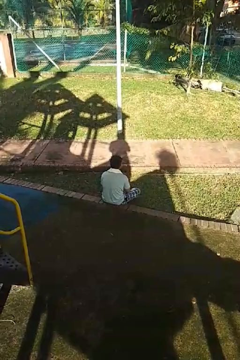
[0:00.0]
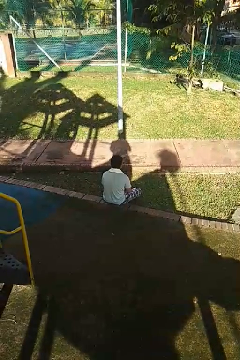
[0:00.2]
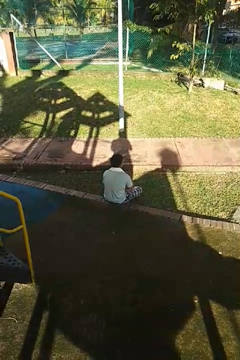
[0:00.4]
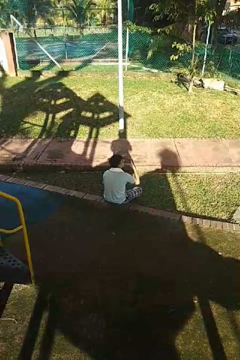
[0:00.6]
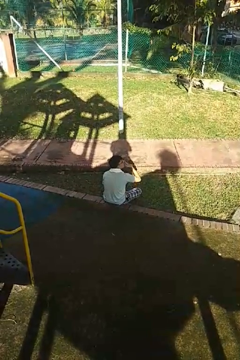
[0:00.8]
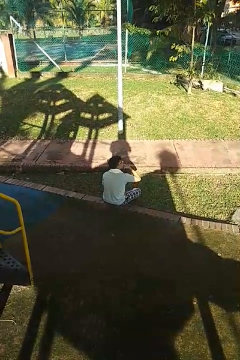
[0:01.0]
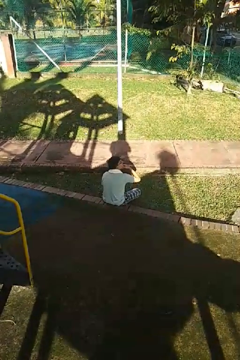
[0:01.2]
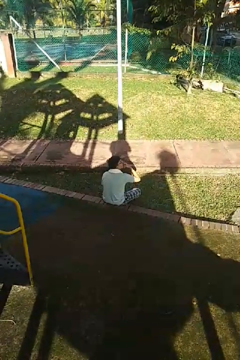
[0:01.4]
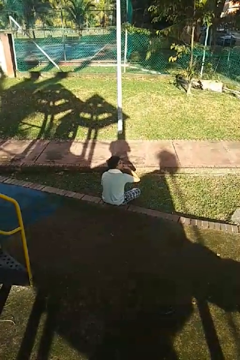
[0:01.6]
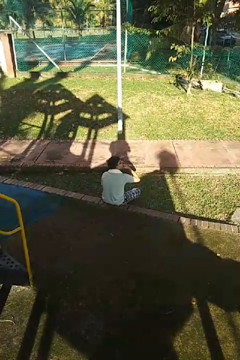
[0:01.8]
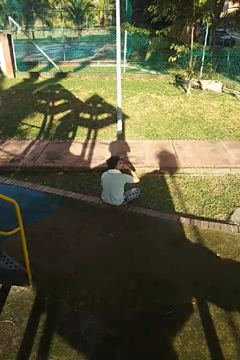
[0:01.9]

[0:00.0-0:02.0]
person strokes chin

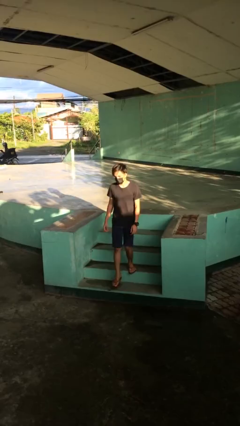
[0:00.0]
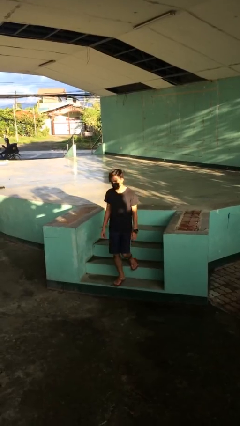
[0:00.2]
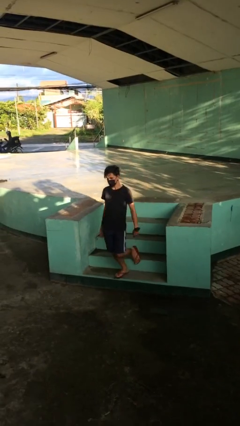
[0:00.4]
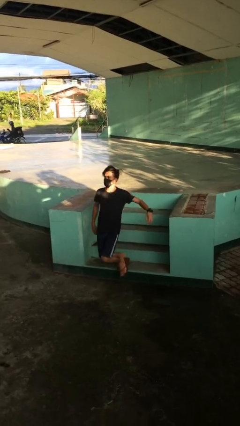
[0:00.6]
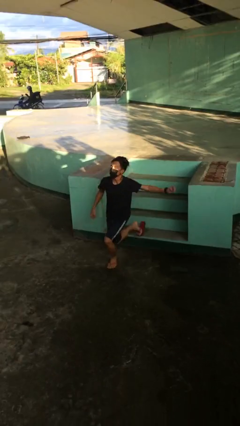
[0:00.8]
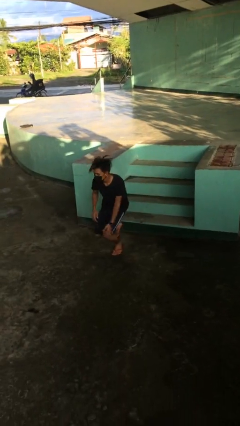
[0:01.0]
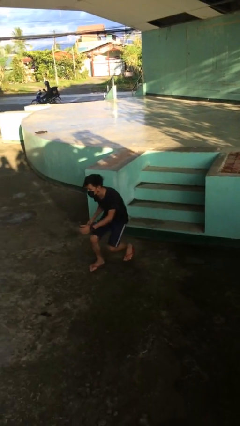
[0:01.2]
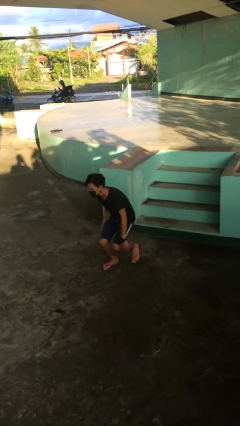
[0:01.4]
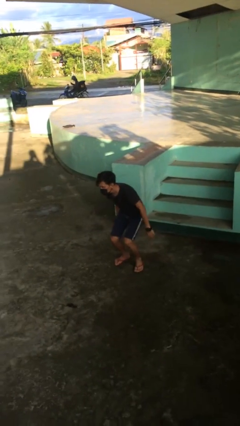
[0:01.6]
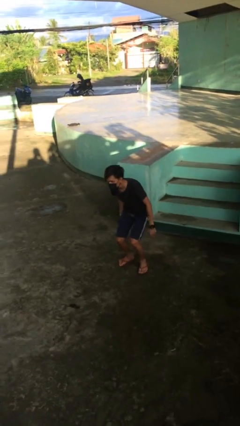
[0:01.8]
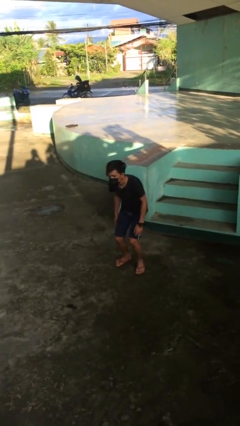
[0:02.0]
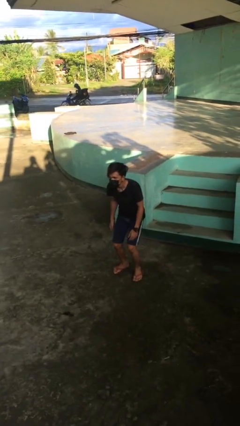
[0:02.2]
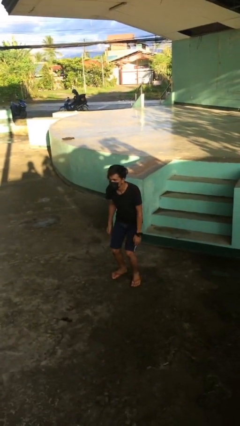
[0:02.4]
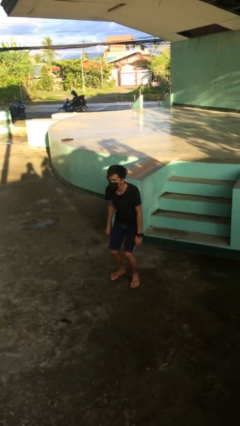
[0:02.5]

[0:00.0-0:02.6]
person trips on stair

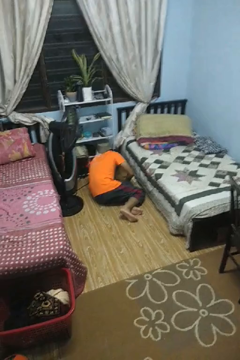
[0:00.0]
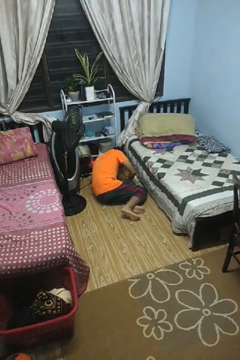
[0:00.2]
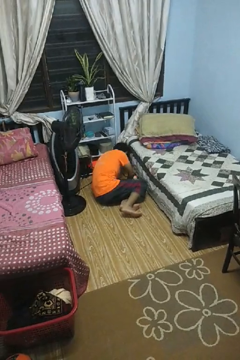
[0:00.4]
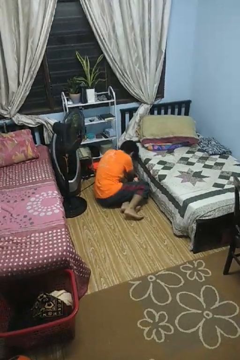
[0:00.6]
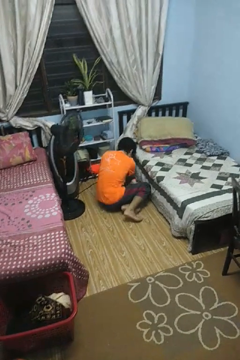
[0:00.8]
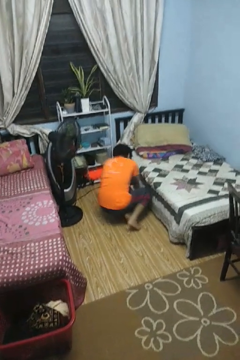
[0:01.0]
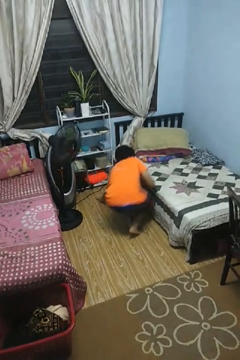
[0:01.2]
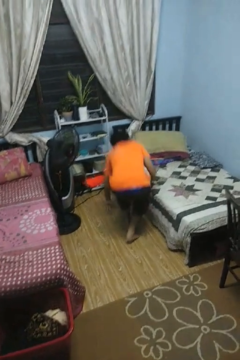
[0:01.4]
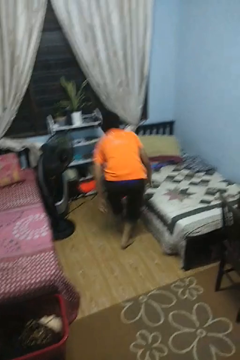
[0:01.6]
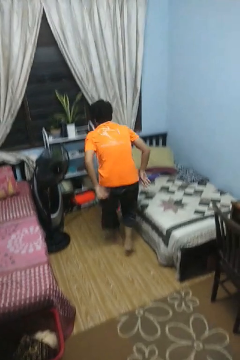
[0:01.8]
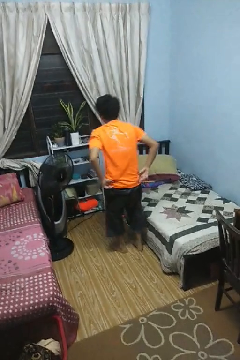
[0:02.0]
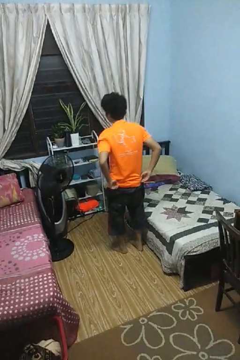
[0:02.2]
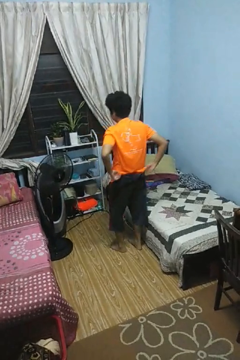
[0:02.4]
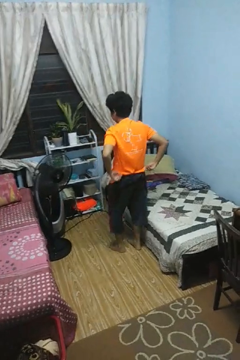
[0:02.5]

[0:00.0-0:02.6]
person stands up from floor

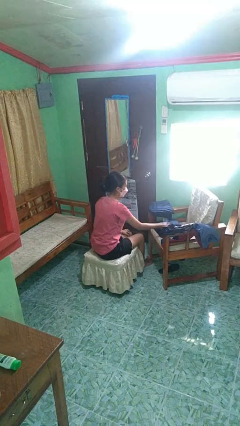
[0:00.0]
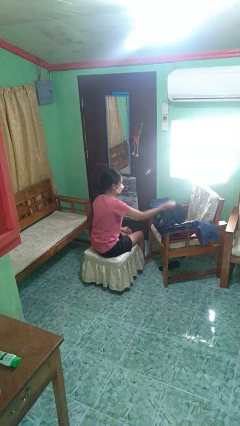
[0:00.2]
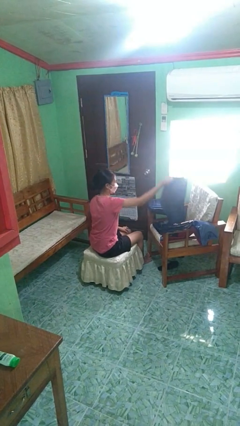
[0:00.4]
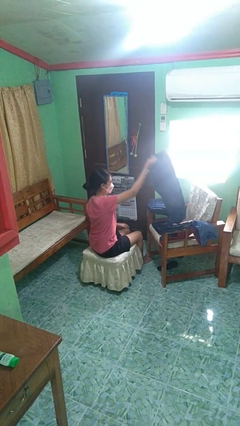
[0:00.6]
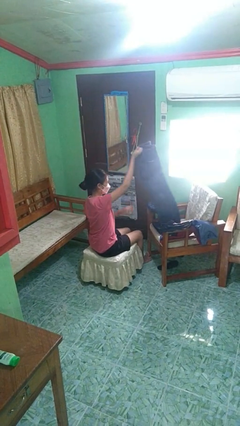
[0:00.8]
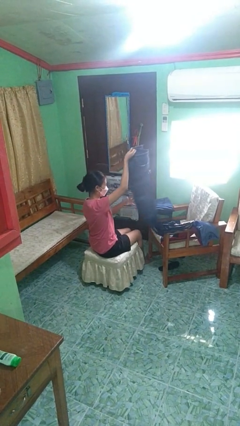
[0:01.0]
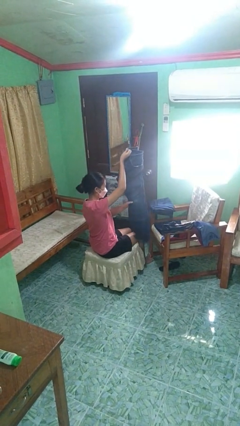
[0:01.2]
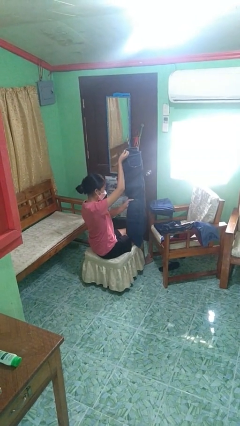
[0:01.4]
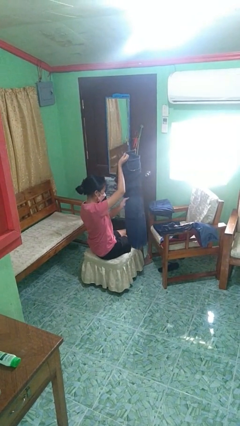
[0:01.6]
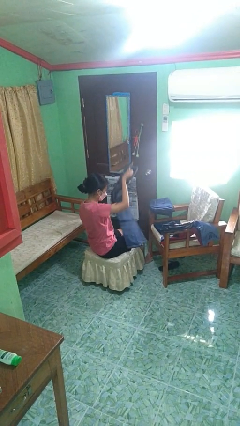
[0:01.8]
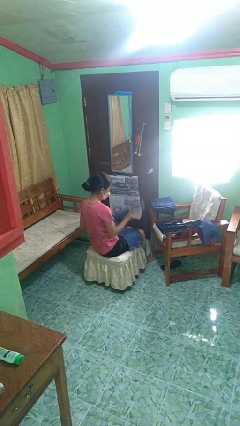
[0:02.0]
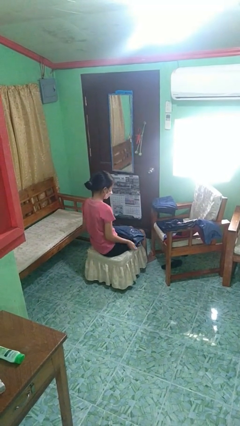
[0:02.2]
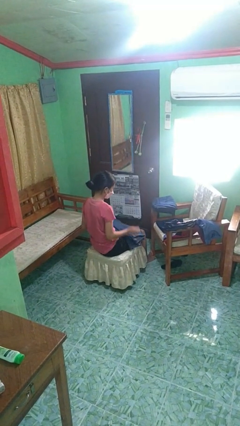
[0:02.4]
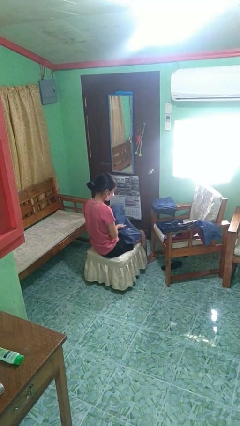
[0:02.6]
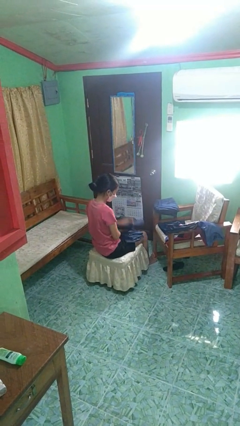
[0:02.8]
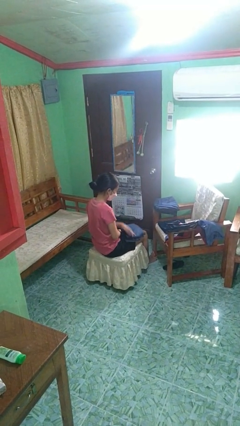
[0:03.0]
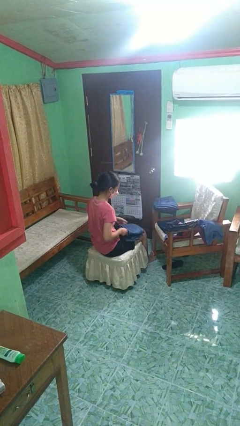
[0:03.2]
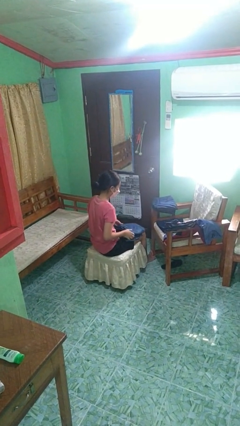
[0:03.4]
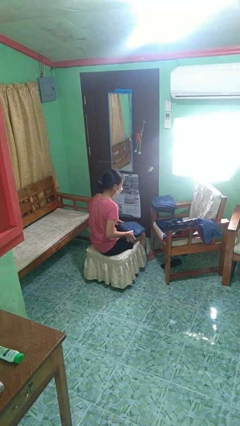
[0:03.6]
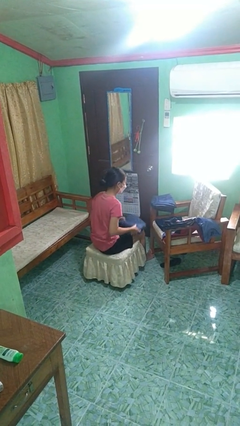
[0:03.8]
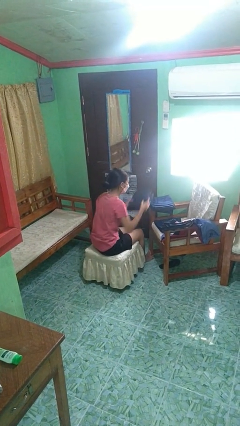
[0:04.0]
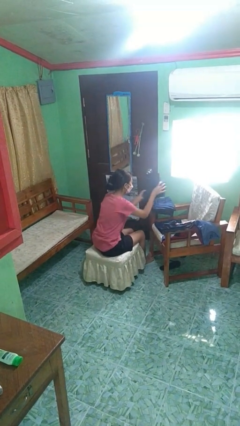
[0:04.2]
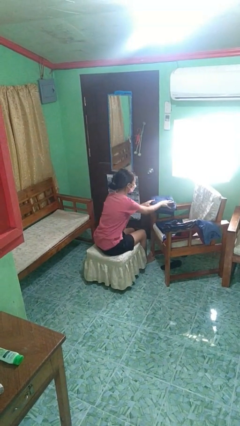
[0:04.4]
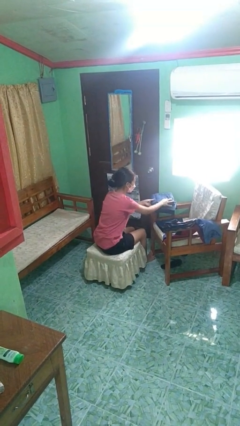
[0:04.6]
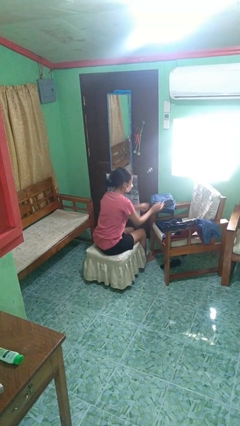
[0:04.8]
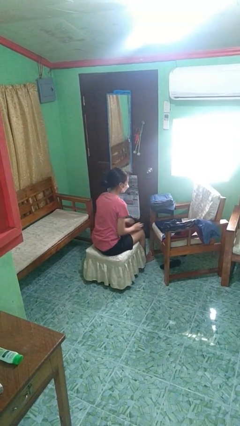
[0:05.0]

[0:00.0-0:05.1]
person folds pants

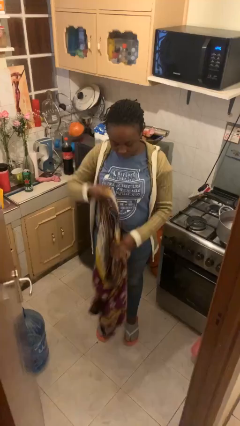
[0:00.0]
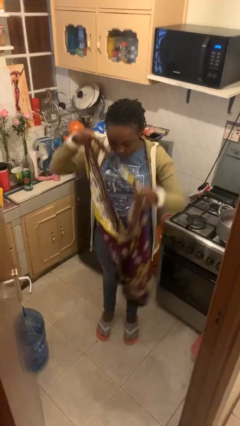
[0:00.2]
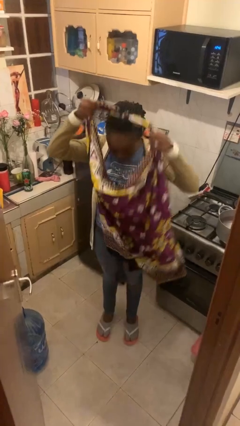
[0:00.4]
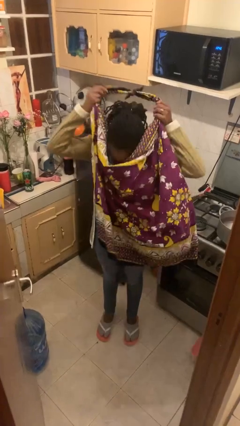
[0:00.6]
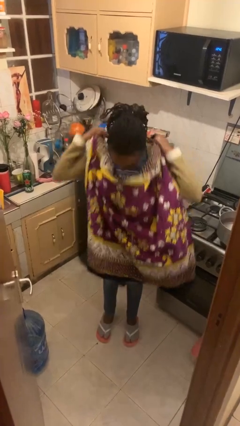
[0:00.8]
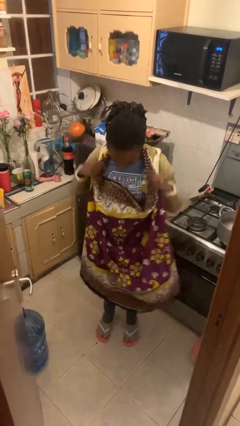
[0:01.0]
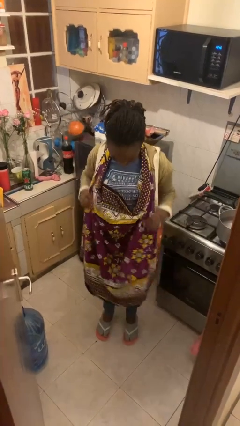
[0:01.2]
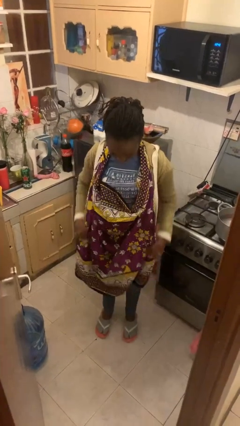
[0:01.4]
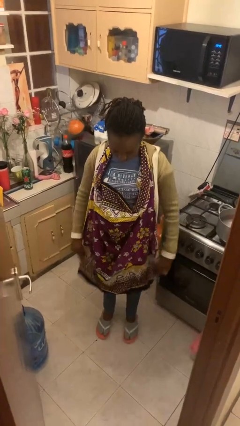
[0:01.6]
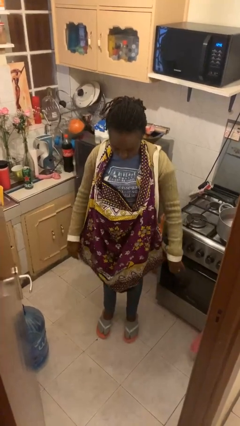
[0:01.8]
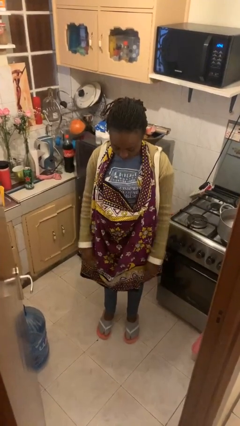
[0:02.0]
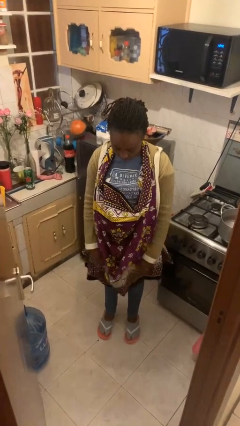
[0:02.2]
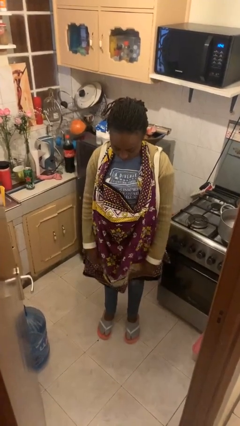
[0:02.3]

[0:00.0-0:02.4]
person puts on apron

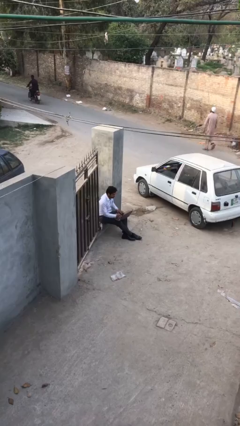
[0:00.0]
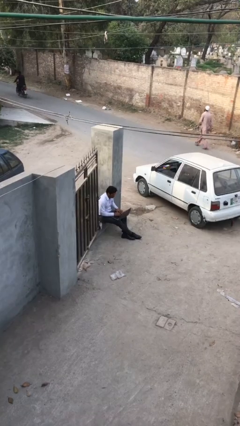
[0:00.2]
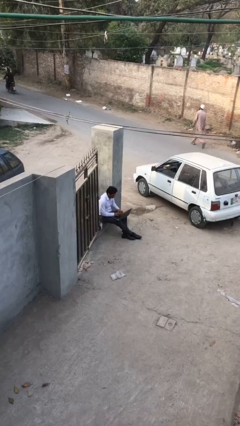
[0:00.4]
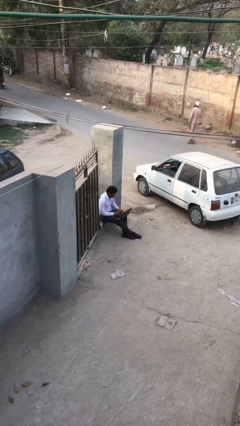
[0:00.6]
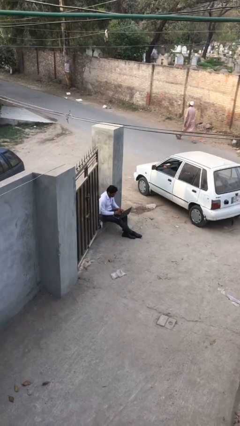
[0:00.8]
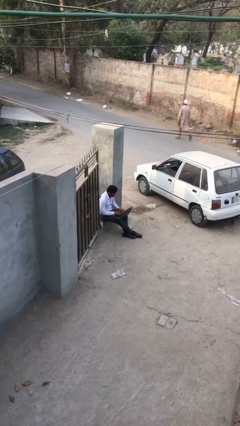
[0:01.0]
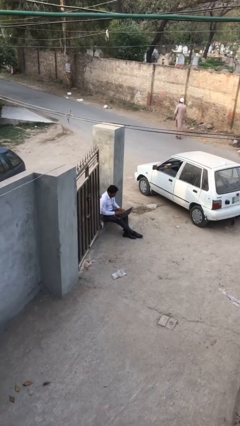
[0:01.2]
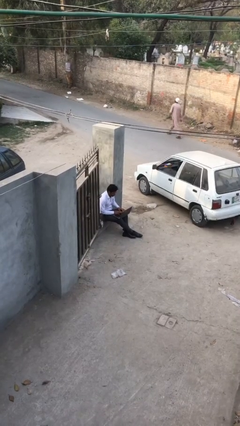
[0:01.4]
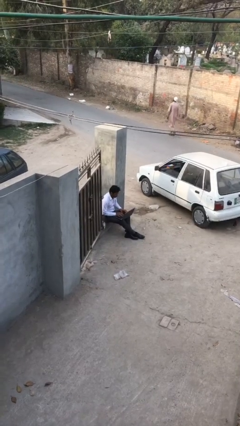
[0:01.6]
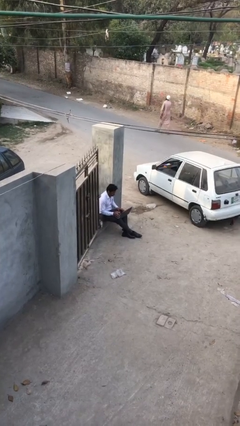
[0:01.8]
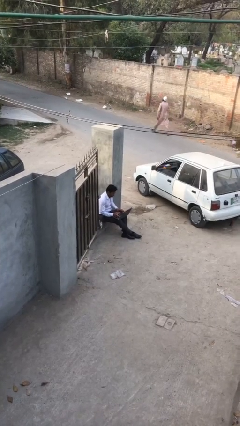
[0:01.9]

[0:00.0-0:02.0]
person interacts with laptop

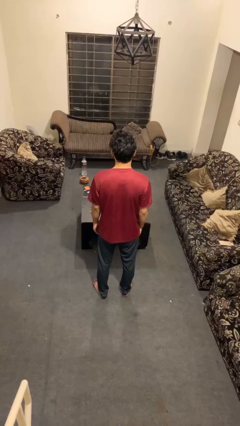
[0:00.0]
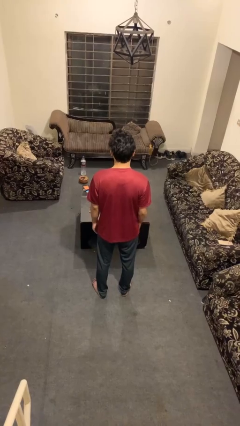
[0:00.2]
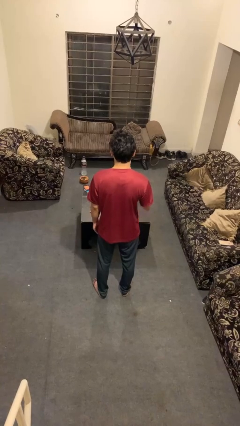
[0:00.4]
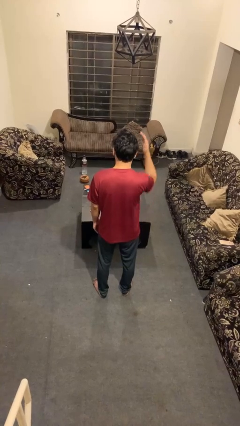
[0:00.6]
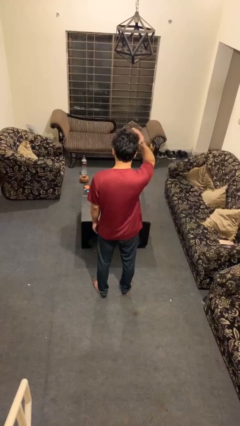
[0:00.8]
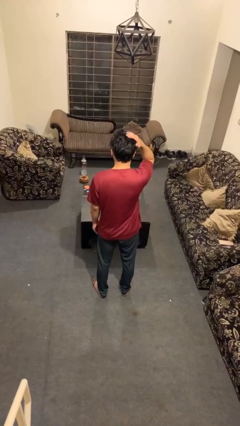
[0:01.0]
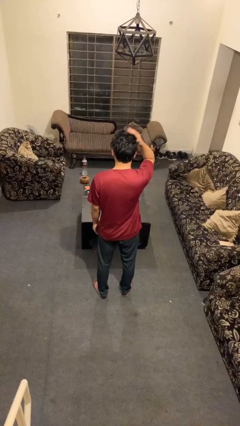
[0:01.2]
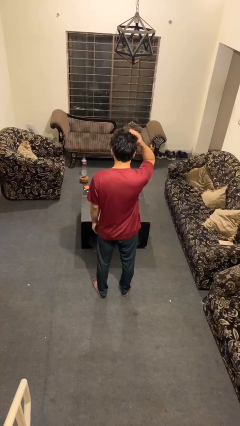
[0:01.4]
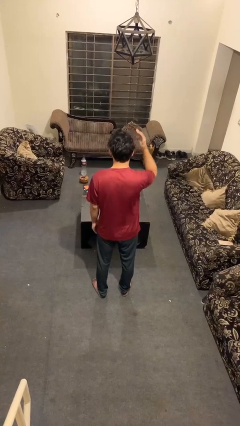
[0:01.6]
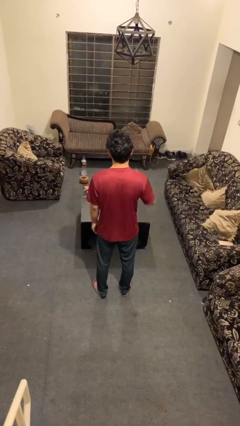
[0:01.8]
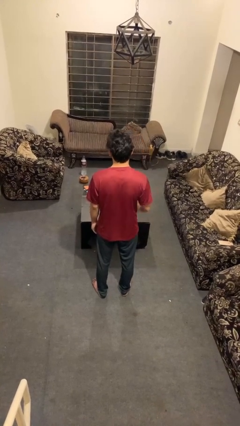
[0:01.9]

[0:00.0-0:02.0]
person pats head
